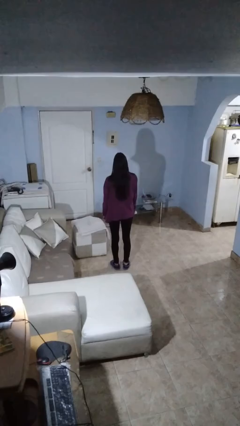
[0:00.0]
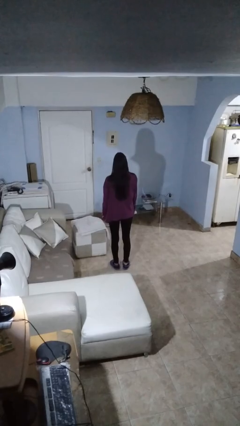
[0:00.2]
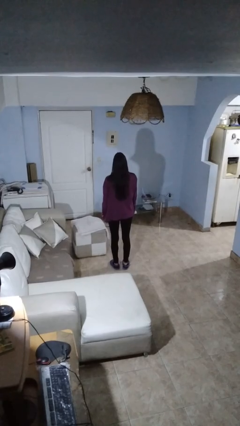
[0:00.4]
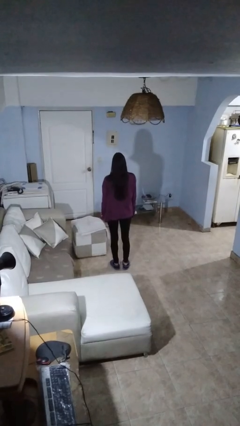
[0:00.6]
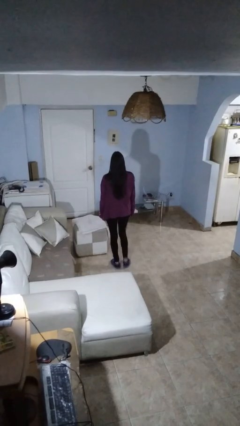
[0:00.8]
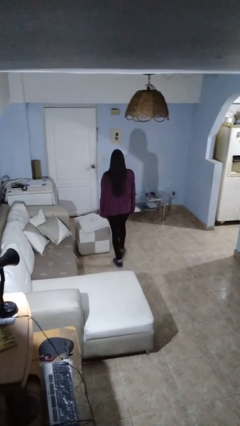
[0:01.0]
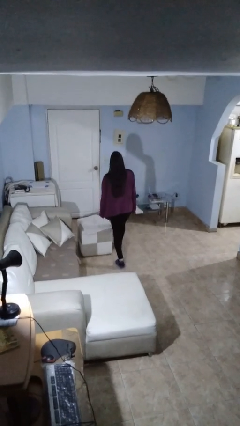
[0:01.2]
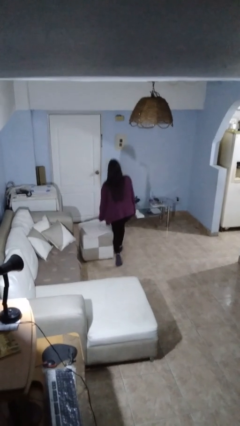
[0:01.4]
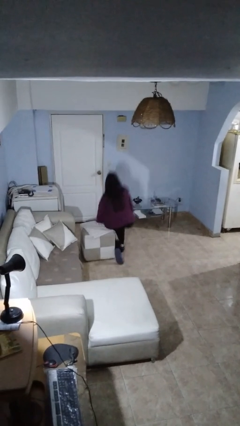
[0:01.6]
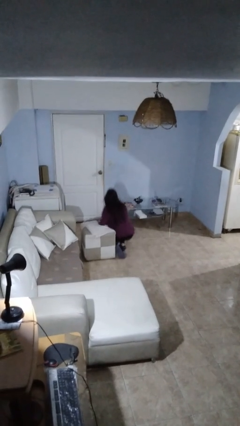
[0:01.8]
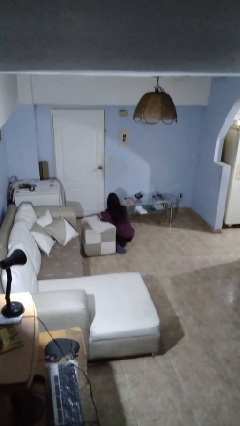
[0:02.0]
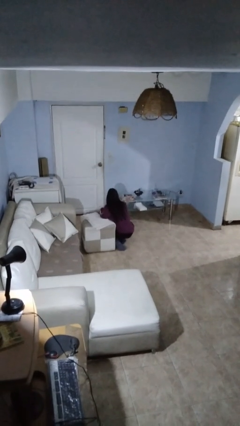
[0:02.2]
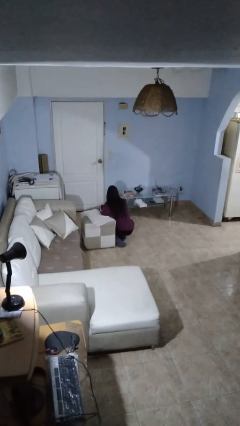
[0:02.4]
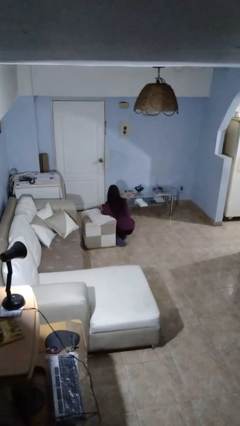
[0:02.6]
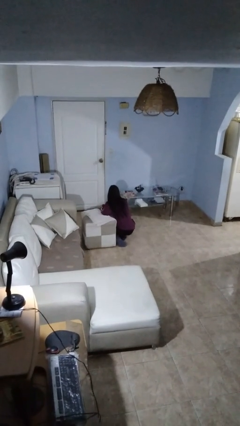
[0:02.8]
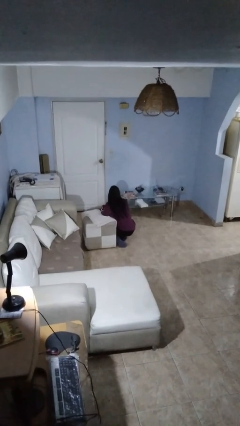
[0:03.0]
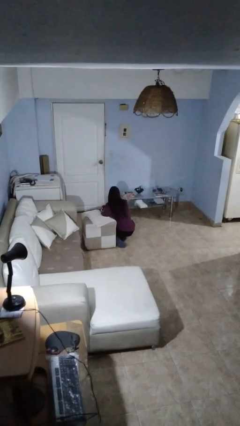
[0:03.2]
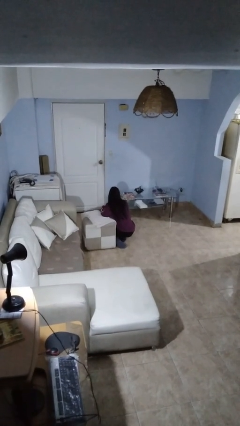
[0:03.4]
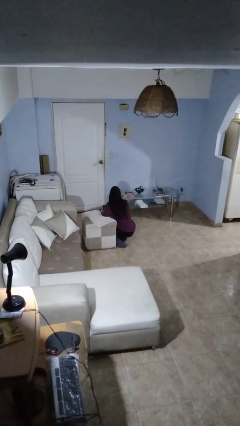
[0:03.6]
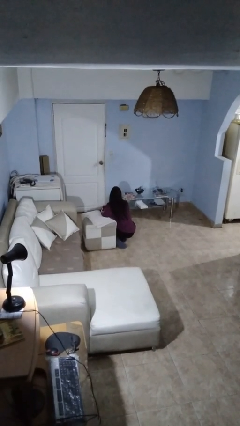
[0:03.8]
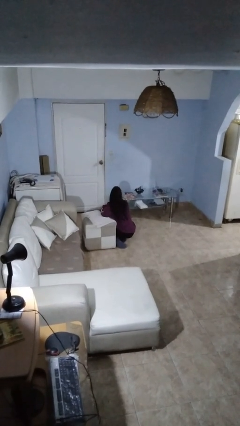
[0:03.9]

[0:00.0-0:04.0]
person trips on object on floor

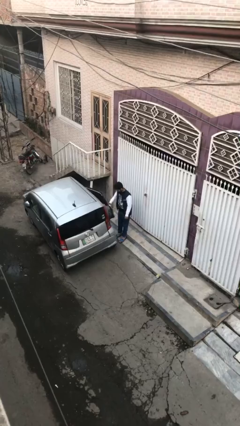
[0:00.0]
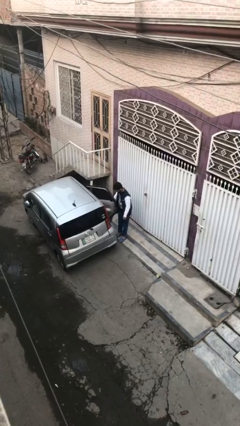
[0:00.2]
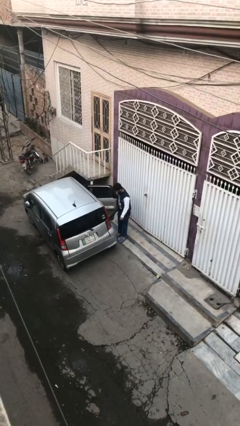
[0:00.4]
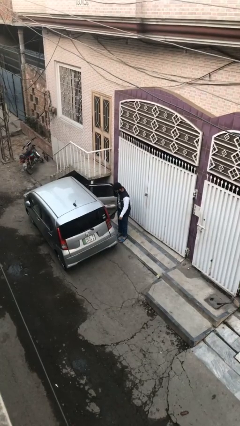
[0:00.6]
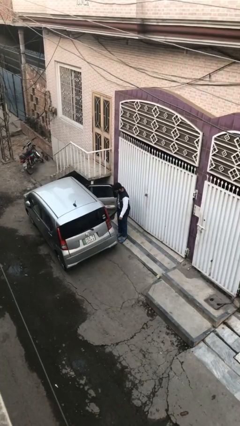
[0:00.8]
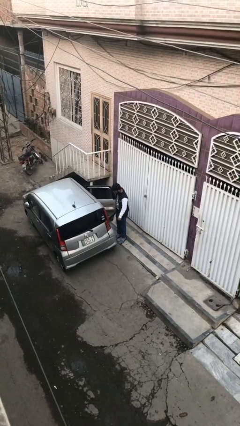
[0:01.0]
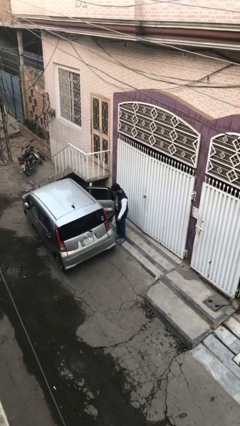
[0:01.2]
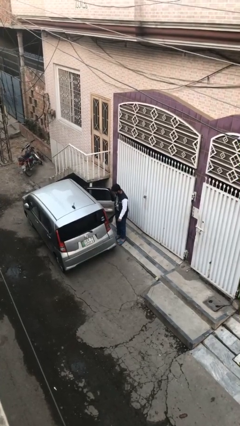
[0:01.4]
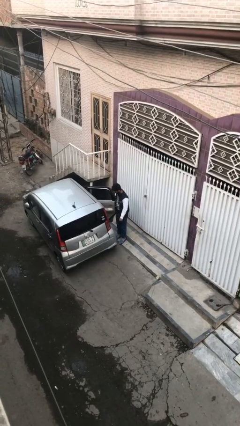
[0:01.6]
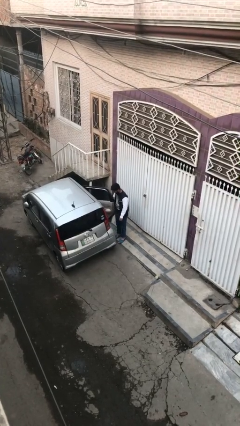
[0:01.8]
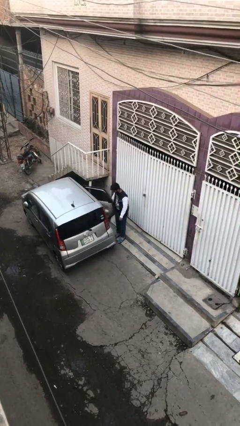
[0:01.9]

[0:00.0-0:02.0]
person opens car door

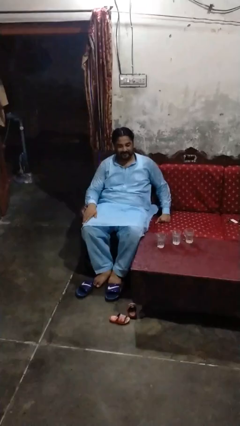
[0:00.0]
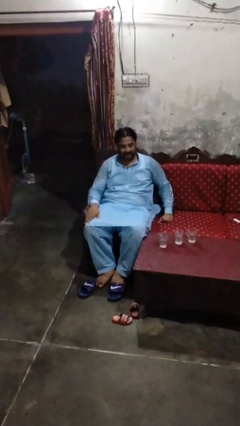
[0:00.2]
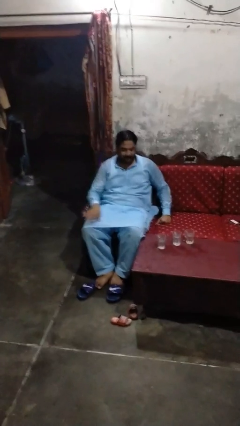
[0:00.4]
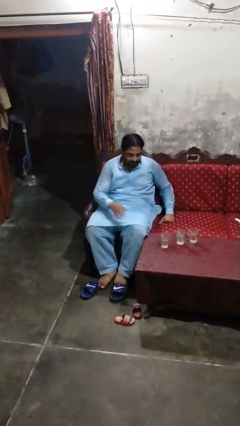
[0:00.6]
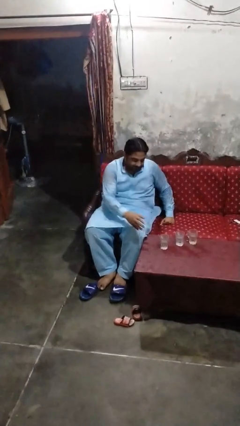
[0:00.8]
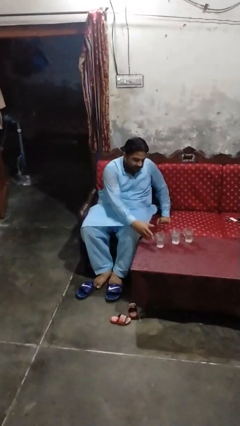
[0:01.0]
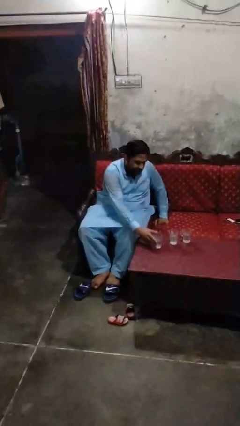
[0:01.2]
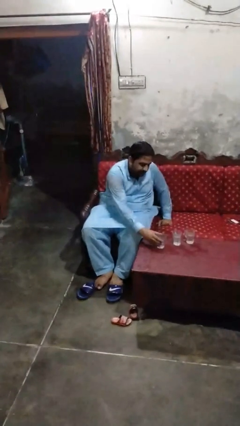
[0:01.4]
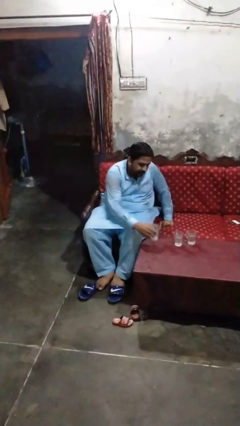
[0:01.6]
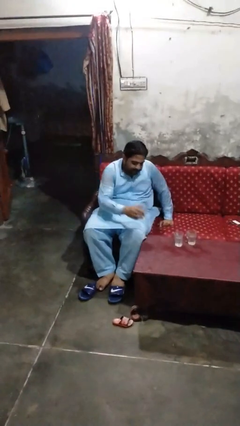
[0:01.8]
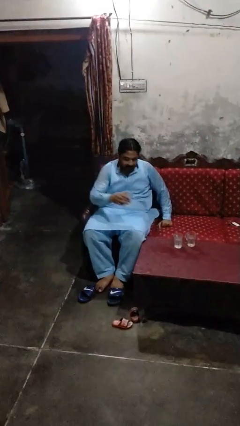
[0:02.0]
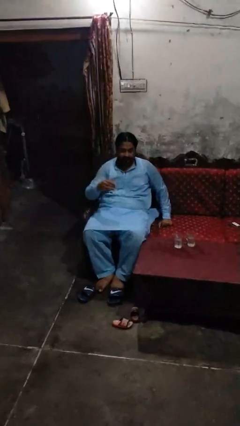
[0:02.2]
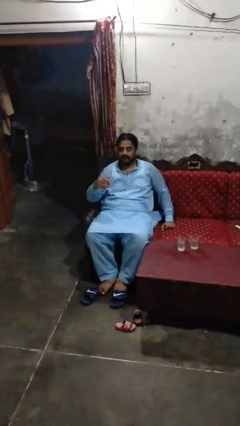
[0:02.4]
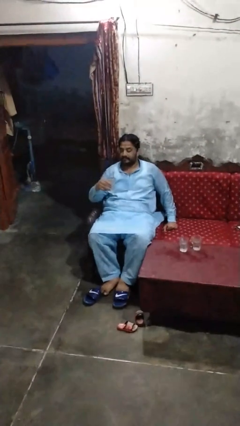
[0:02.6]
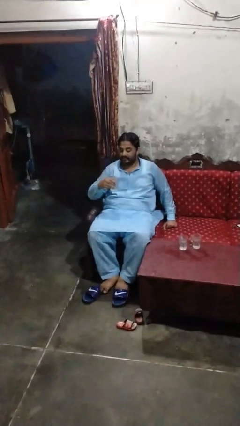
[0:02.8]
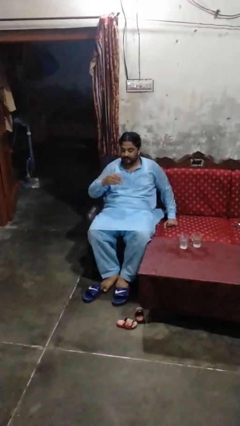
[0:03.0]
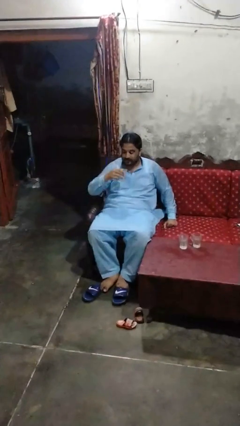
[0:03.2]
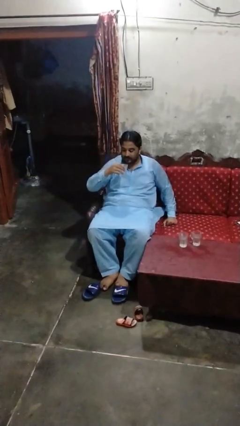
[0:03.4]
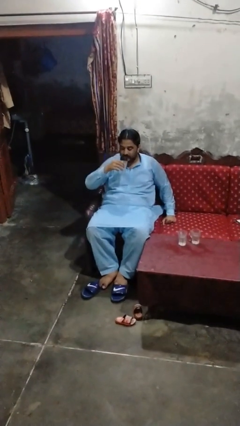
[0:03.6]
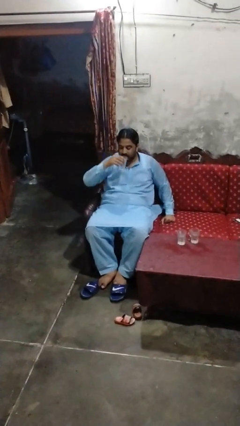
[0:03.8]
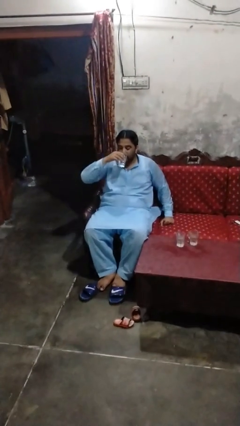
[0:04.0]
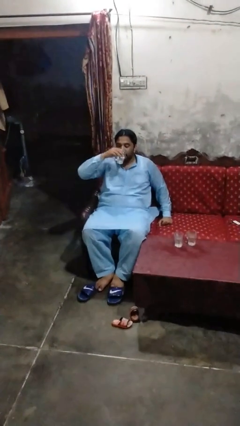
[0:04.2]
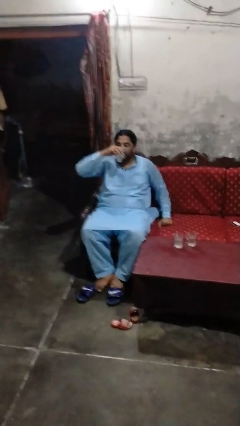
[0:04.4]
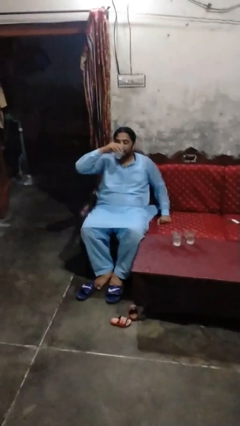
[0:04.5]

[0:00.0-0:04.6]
person picks up object from table

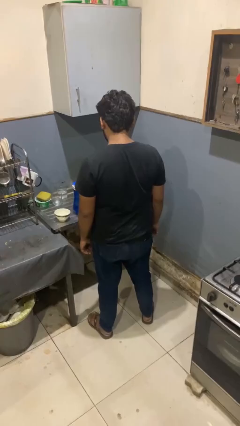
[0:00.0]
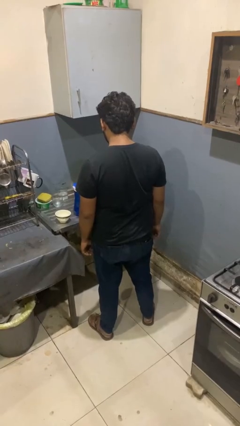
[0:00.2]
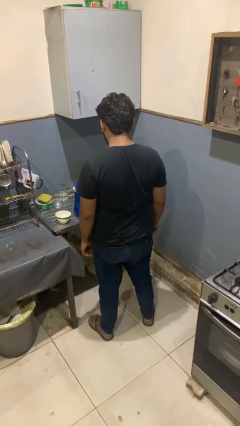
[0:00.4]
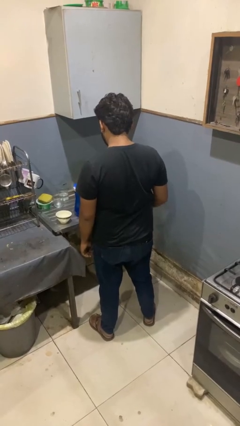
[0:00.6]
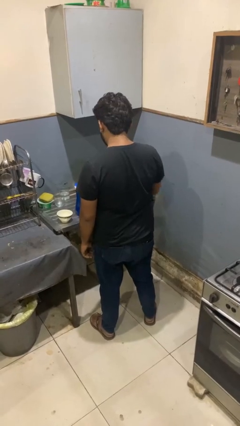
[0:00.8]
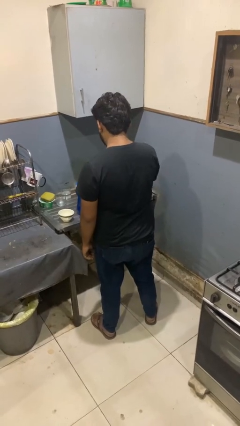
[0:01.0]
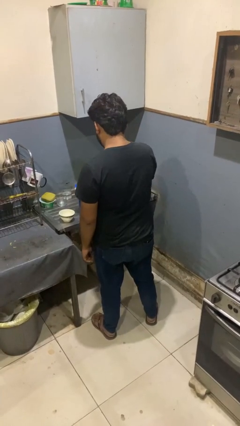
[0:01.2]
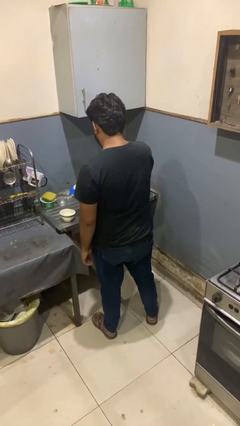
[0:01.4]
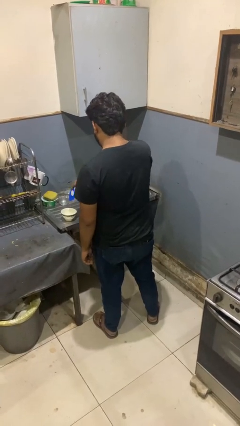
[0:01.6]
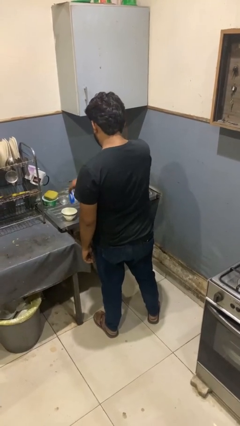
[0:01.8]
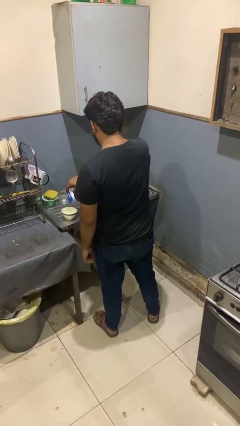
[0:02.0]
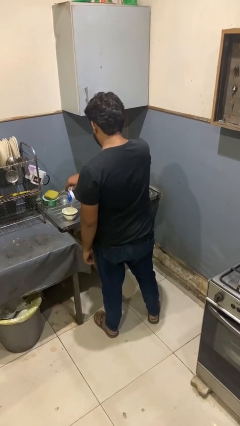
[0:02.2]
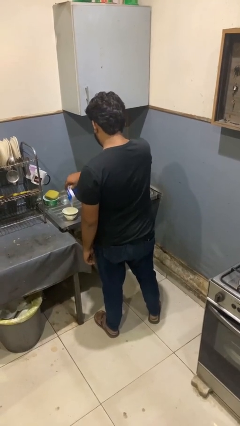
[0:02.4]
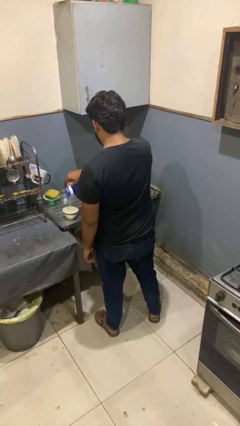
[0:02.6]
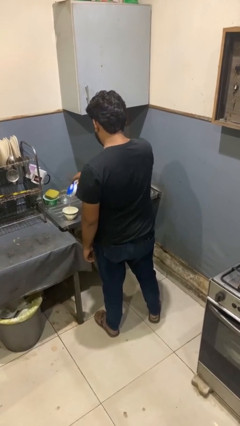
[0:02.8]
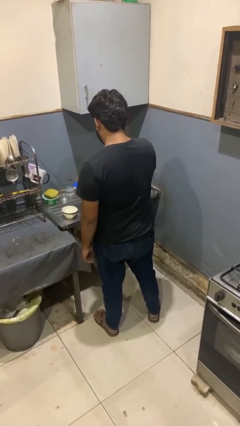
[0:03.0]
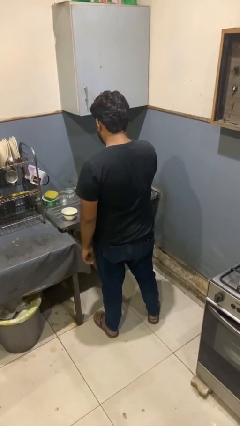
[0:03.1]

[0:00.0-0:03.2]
person pours into bowl

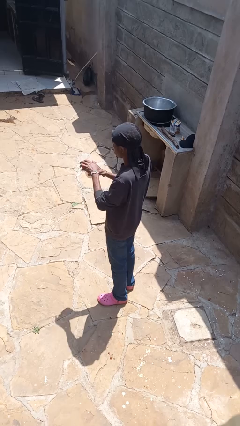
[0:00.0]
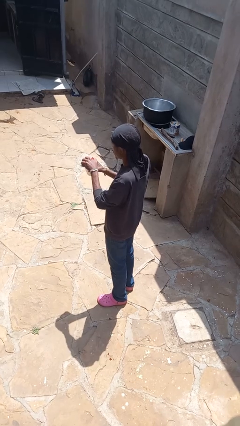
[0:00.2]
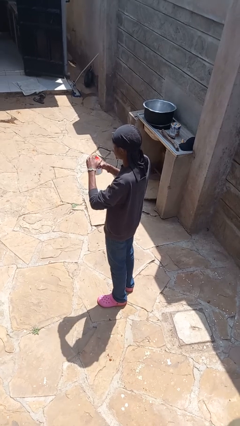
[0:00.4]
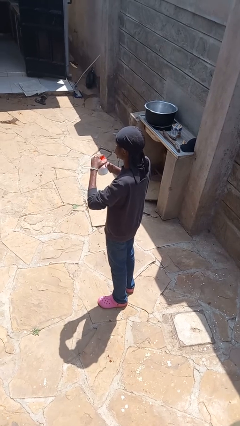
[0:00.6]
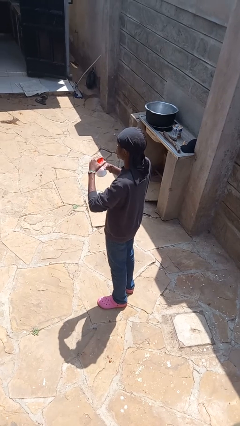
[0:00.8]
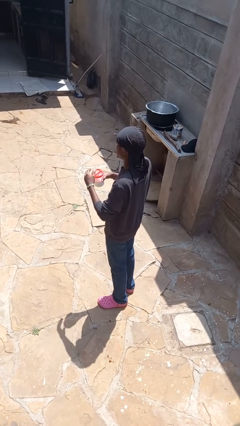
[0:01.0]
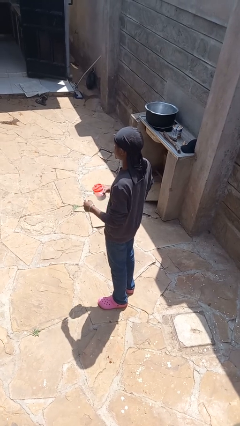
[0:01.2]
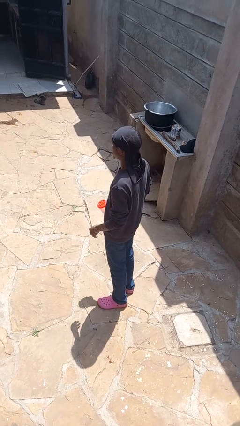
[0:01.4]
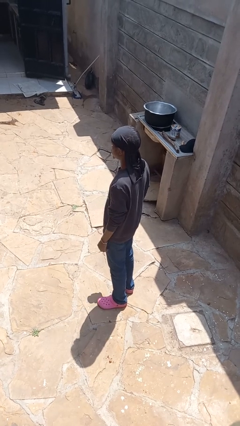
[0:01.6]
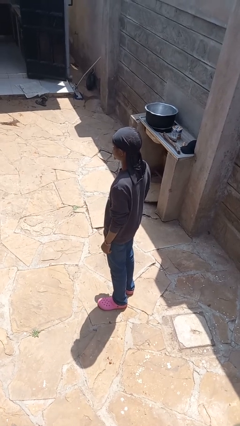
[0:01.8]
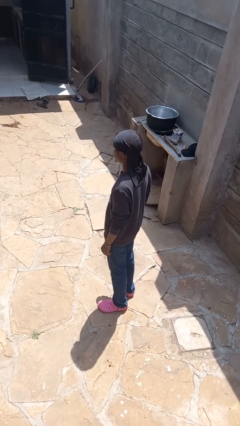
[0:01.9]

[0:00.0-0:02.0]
person closes jar

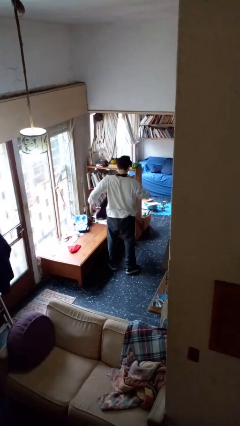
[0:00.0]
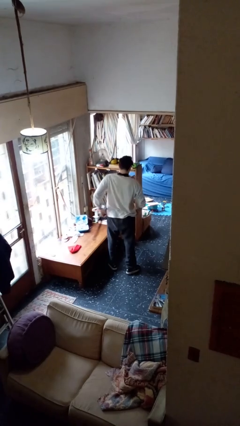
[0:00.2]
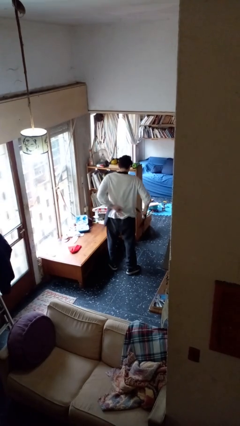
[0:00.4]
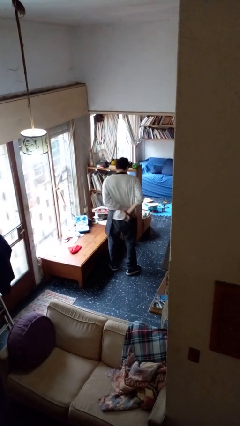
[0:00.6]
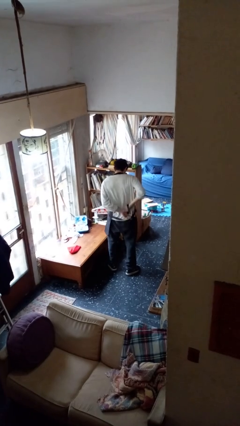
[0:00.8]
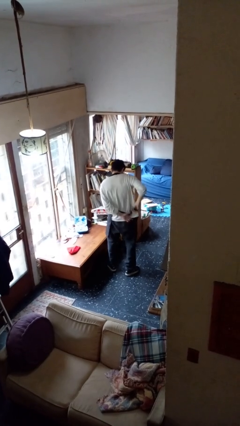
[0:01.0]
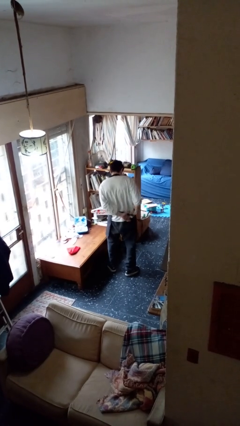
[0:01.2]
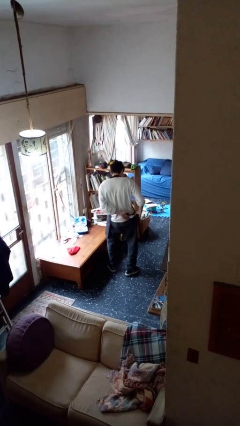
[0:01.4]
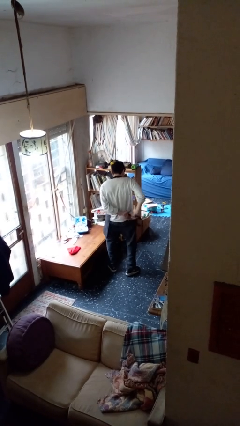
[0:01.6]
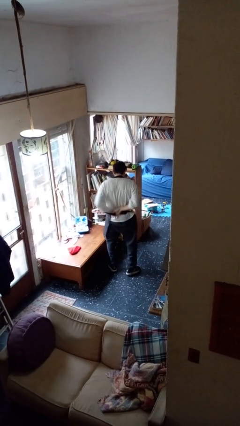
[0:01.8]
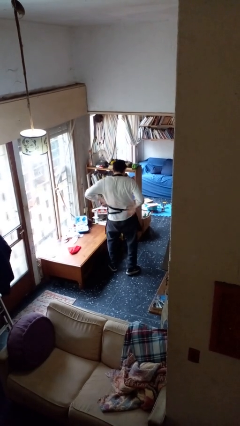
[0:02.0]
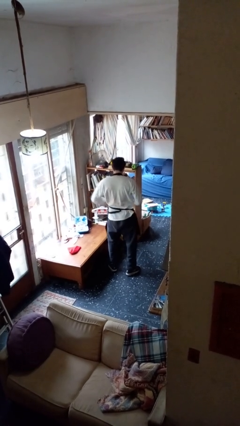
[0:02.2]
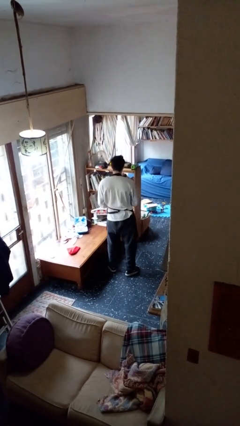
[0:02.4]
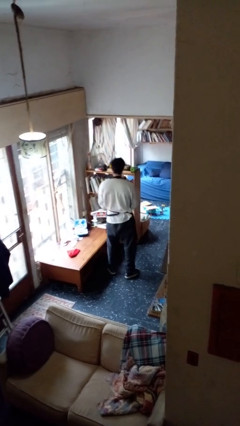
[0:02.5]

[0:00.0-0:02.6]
person puts on apron
